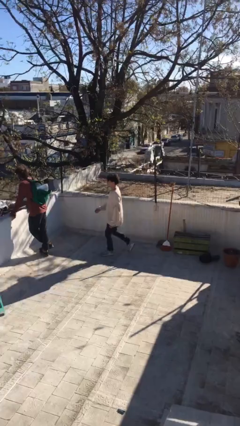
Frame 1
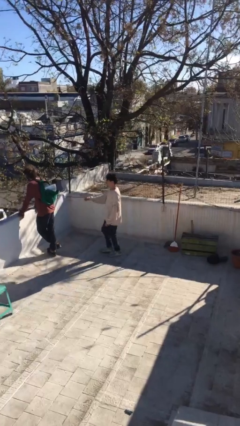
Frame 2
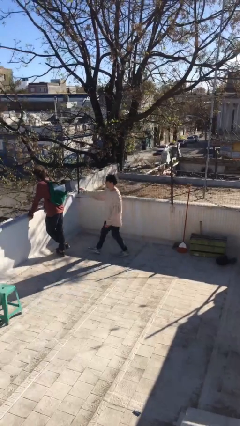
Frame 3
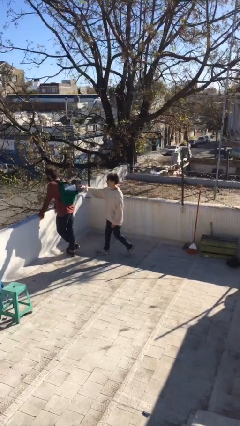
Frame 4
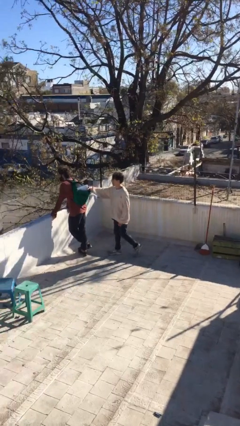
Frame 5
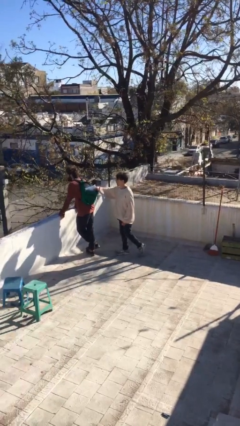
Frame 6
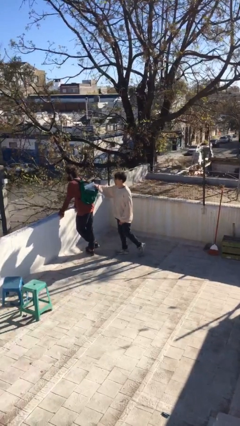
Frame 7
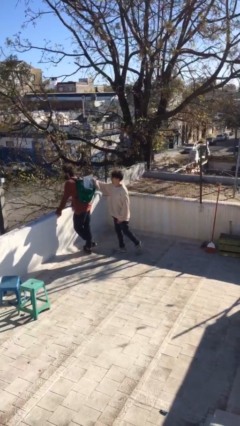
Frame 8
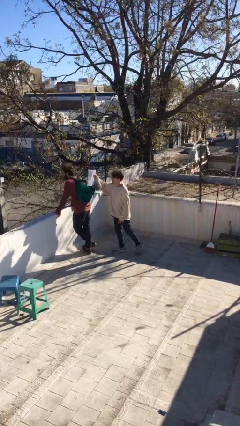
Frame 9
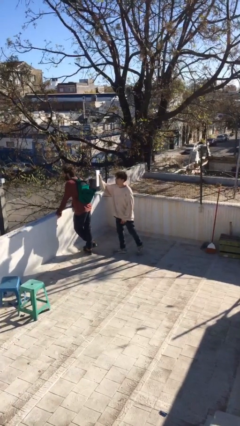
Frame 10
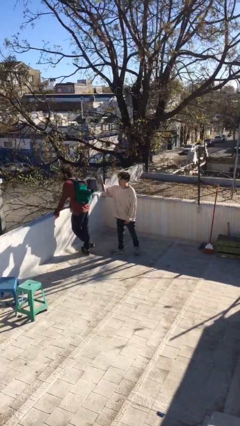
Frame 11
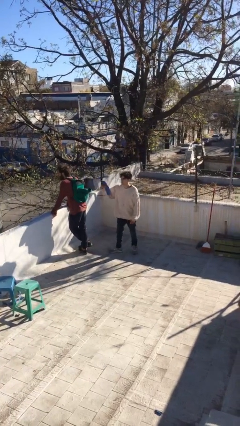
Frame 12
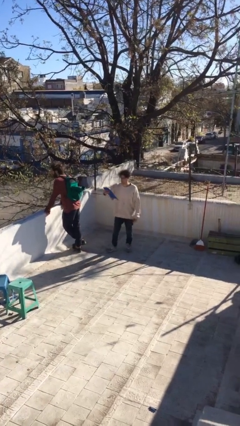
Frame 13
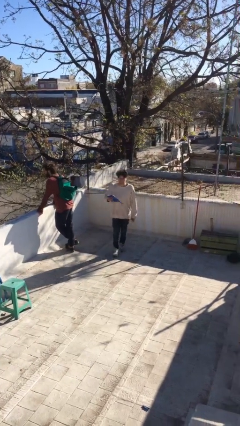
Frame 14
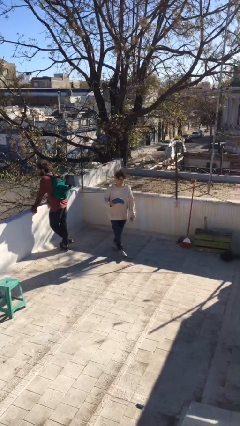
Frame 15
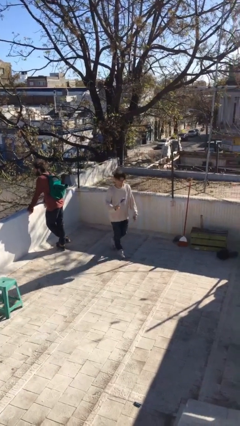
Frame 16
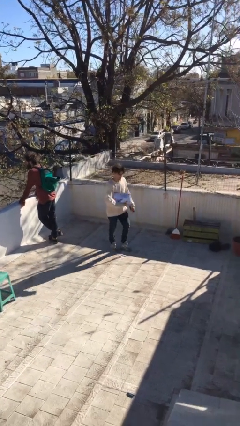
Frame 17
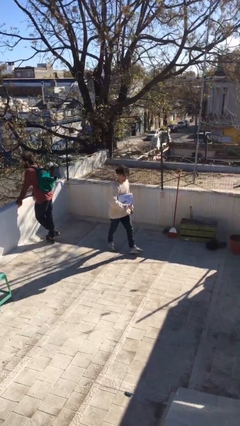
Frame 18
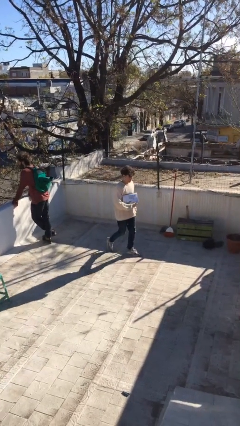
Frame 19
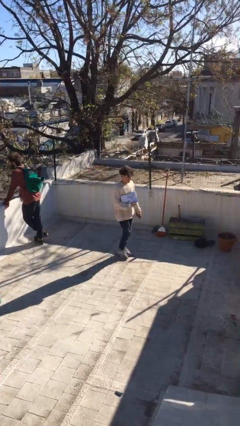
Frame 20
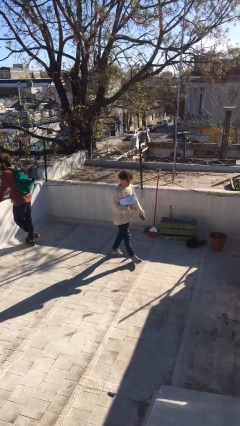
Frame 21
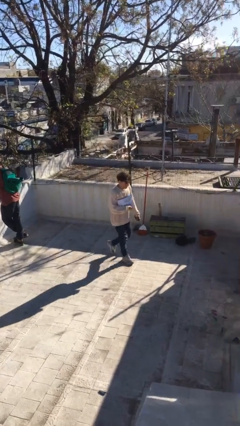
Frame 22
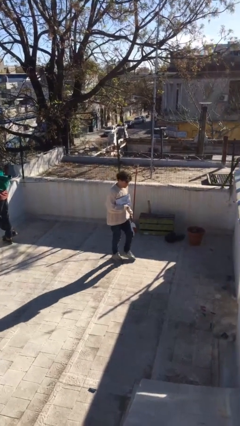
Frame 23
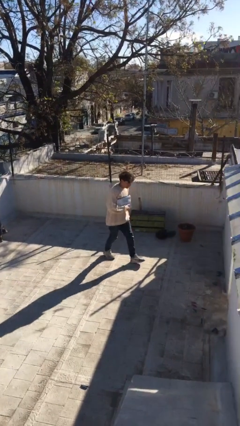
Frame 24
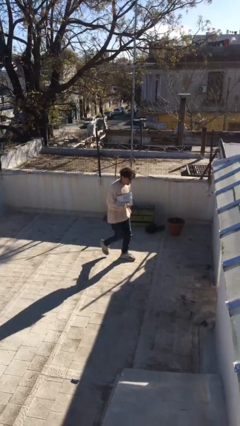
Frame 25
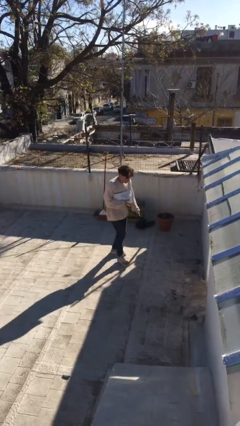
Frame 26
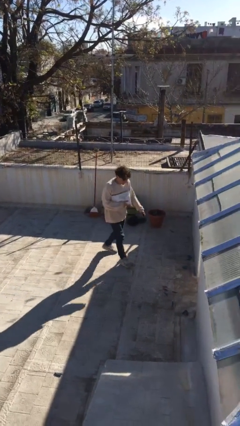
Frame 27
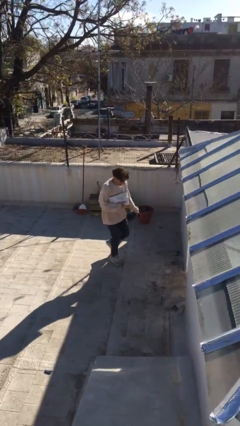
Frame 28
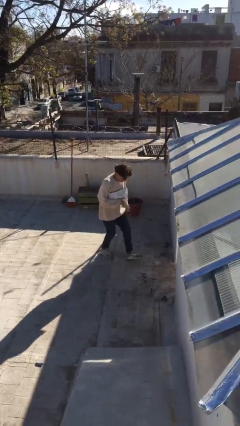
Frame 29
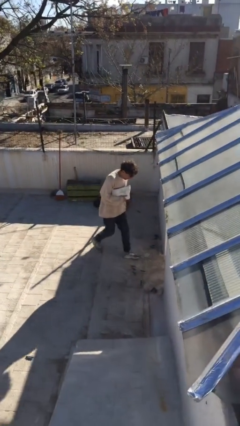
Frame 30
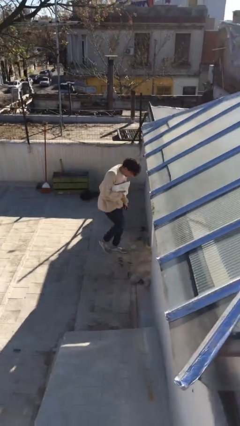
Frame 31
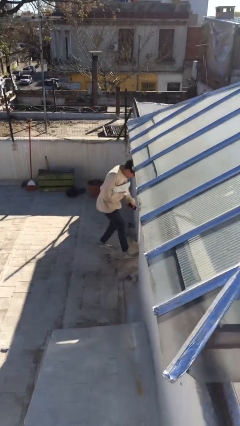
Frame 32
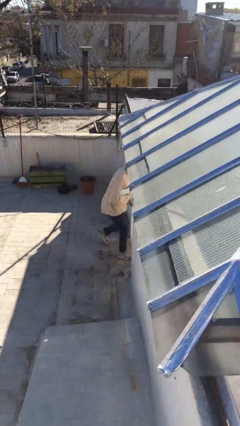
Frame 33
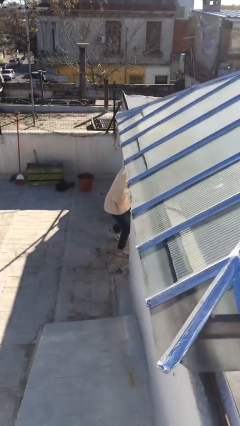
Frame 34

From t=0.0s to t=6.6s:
person steals object from person

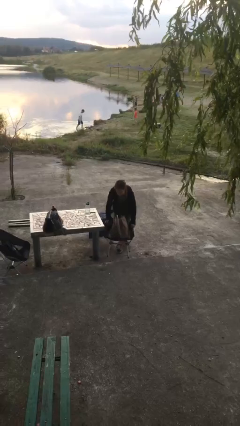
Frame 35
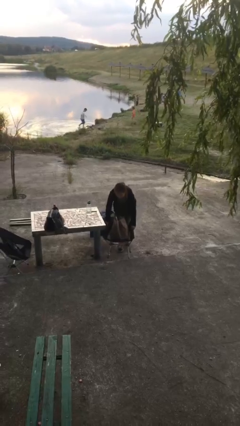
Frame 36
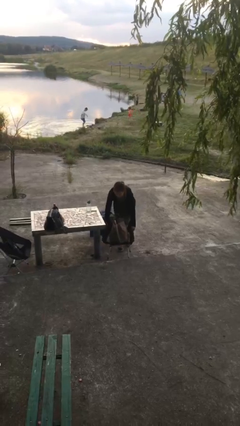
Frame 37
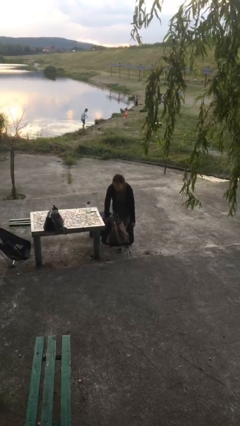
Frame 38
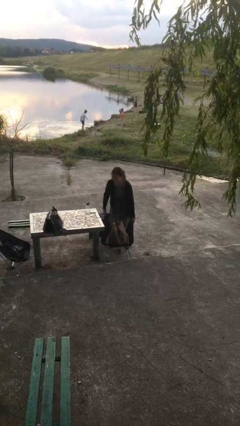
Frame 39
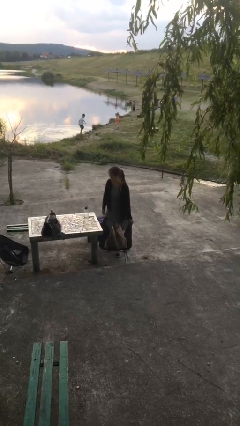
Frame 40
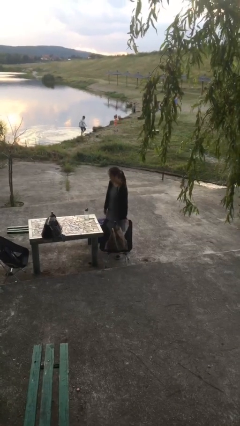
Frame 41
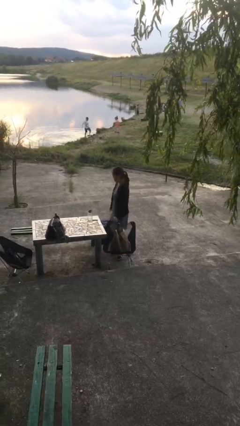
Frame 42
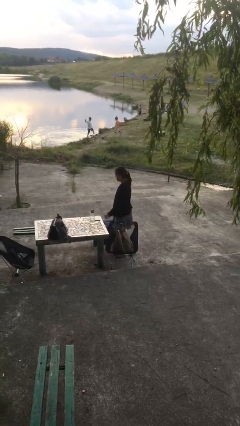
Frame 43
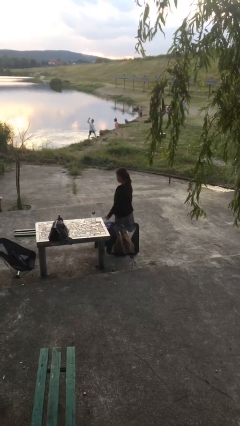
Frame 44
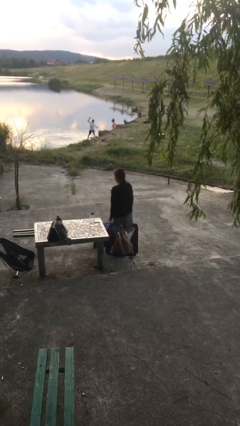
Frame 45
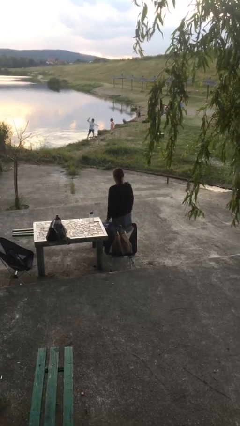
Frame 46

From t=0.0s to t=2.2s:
person puts down object on floor

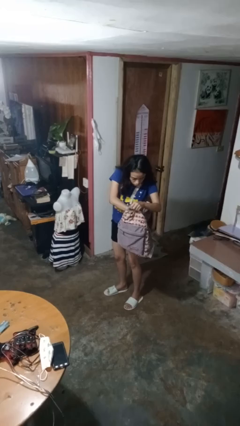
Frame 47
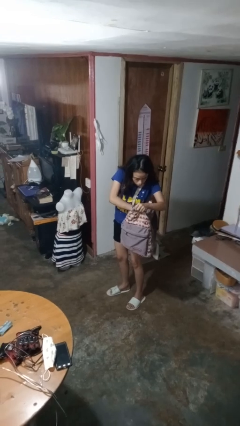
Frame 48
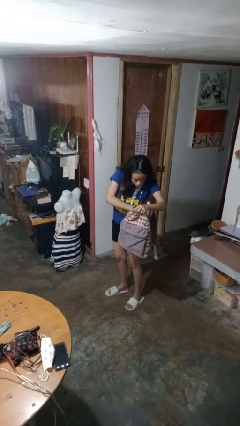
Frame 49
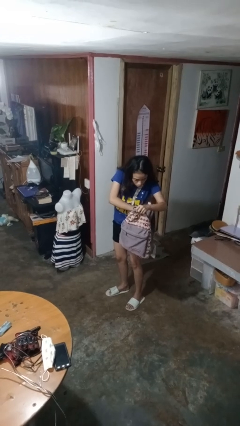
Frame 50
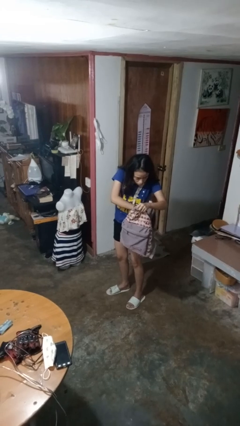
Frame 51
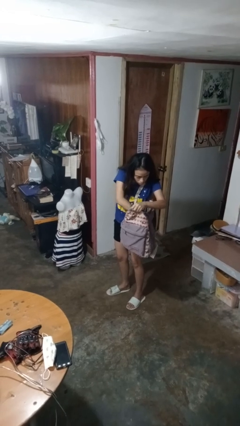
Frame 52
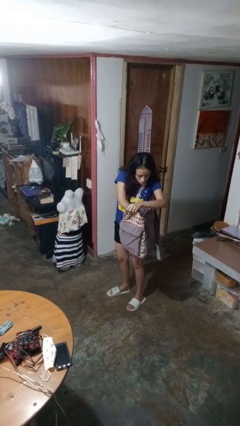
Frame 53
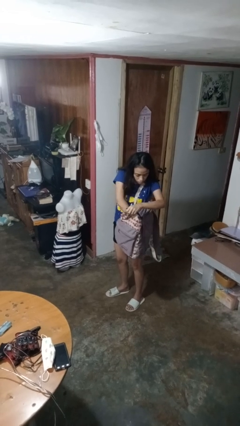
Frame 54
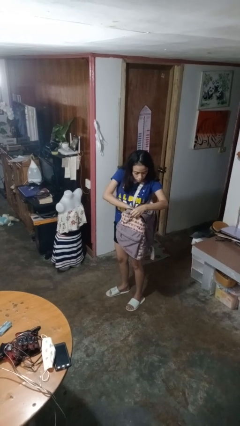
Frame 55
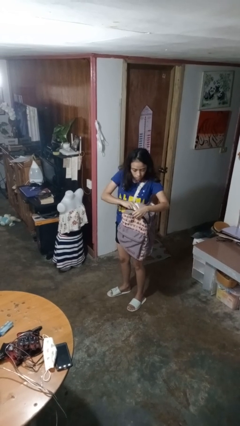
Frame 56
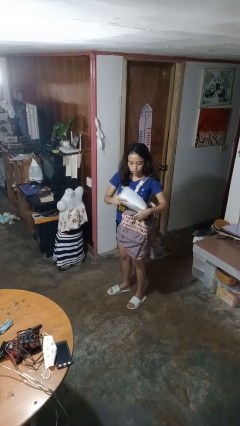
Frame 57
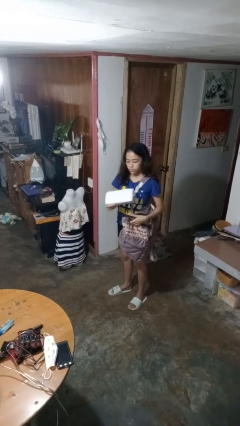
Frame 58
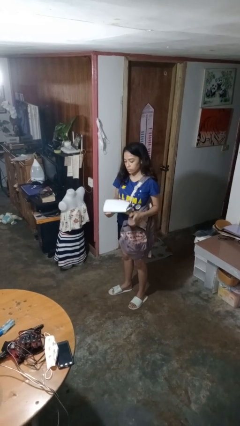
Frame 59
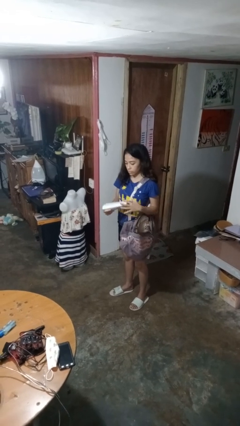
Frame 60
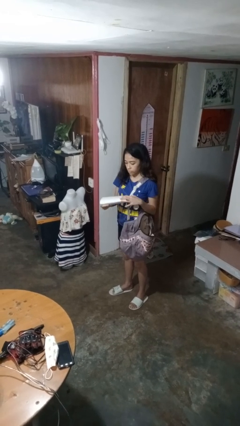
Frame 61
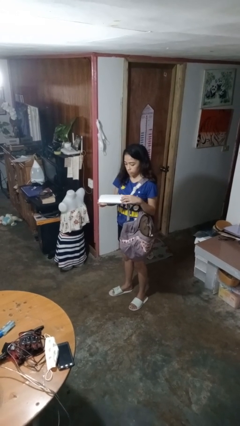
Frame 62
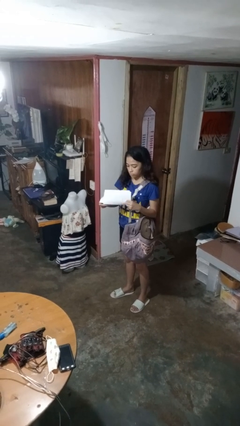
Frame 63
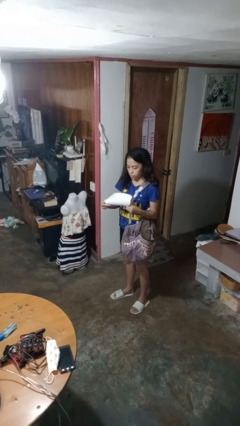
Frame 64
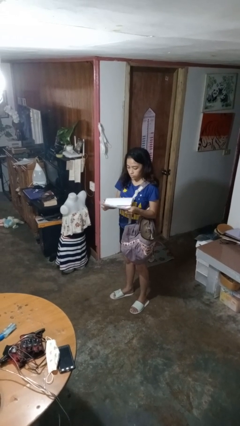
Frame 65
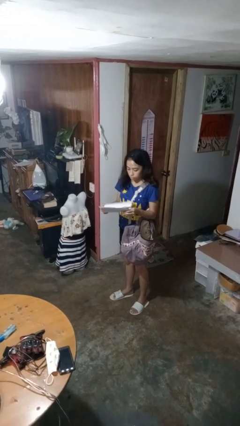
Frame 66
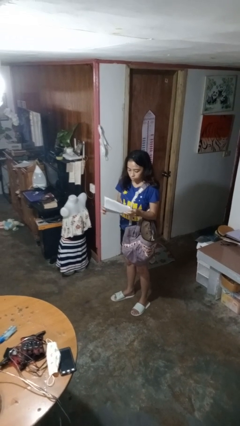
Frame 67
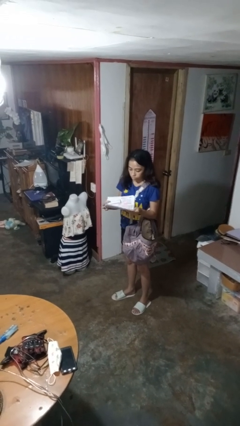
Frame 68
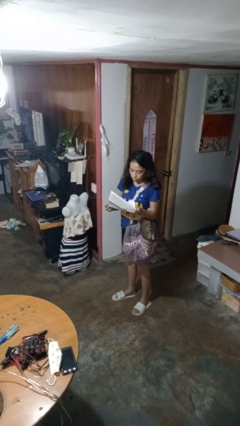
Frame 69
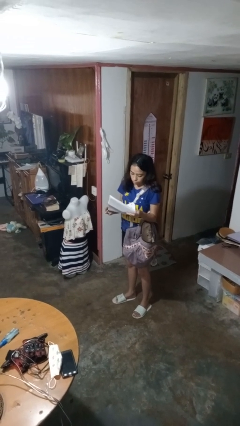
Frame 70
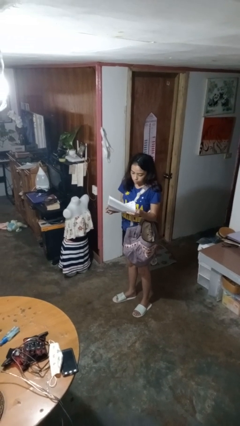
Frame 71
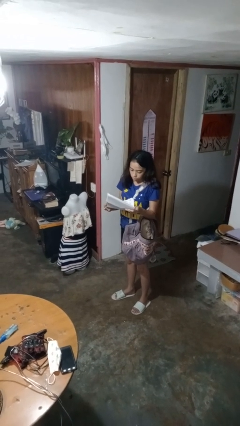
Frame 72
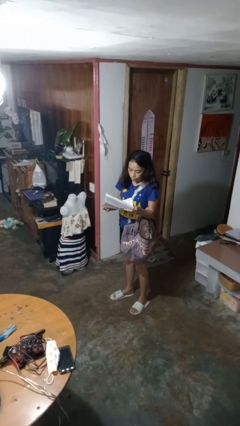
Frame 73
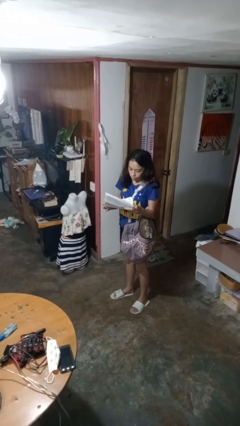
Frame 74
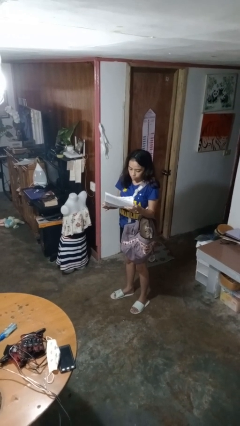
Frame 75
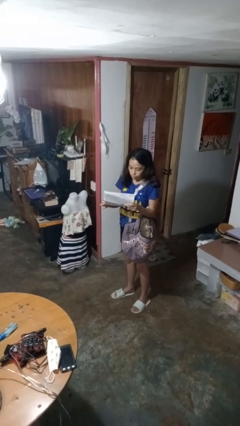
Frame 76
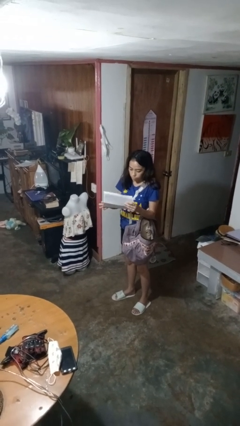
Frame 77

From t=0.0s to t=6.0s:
person takes object from backpack

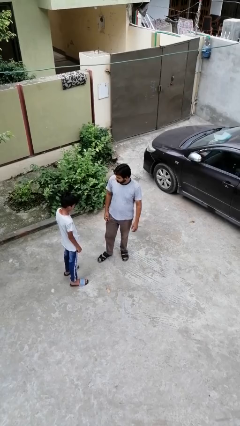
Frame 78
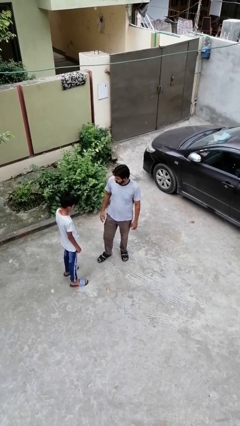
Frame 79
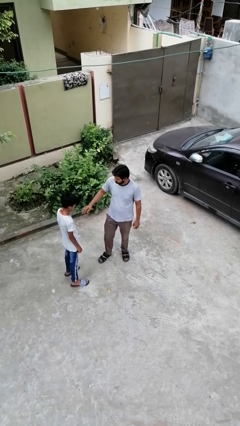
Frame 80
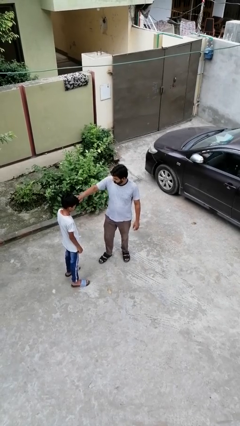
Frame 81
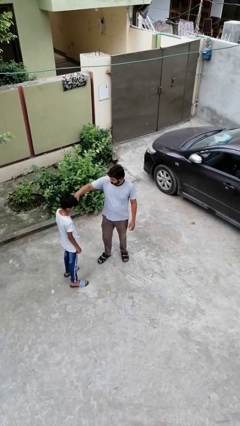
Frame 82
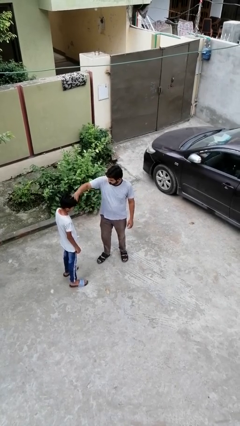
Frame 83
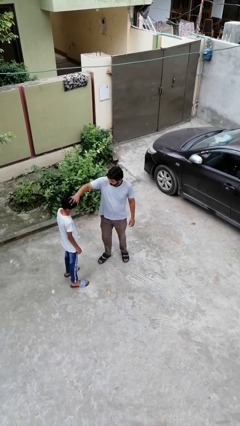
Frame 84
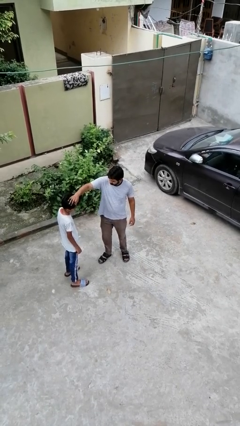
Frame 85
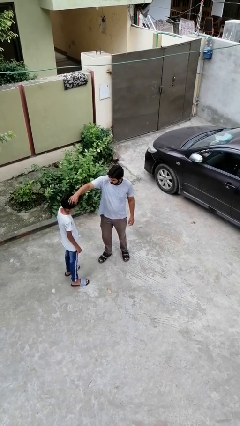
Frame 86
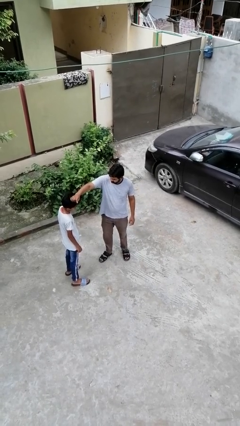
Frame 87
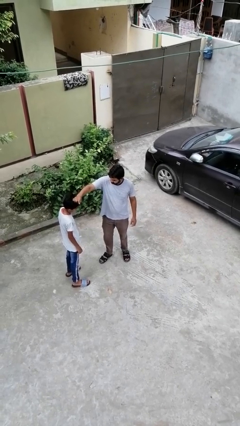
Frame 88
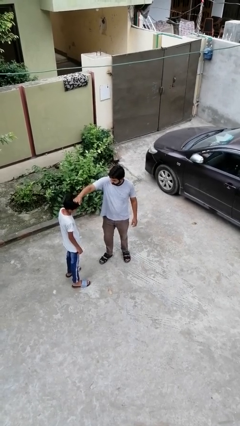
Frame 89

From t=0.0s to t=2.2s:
person grabs person by hair

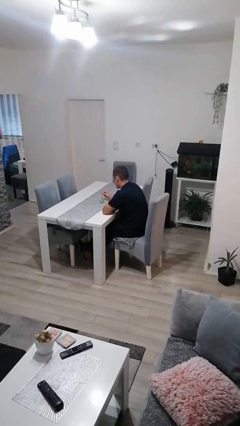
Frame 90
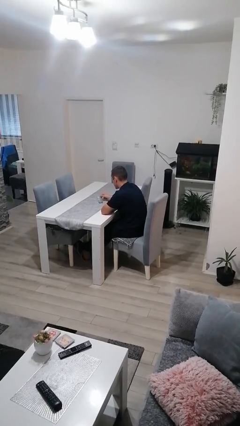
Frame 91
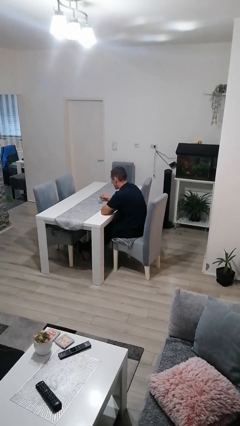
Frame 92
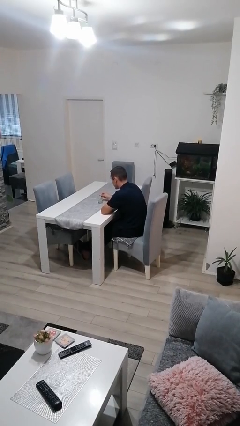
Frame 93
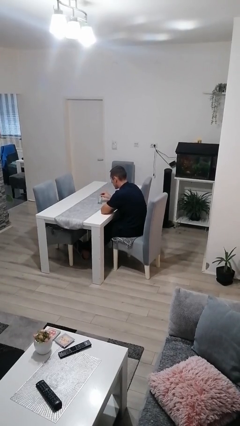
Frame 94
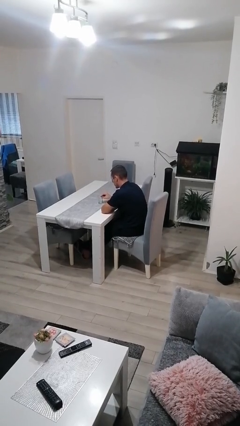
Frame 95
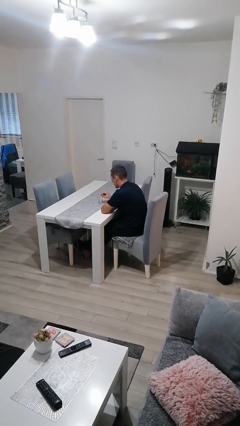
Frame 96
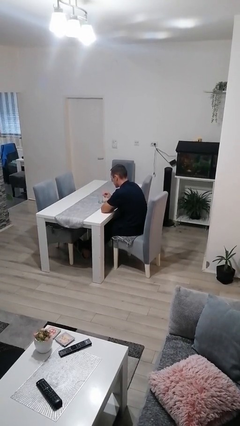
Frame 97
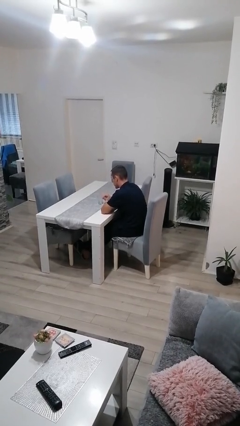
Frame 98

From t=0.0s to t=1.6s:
person sets upright glass
